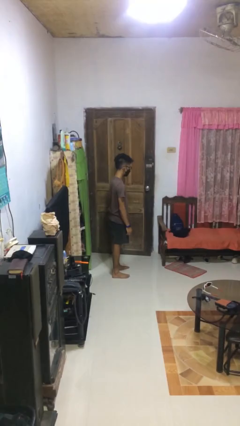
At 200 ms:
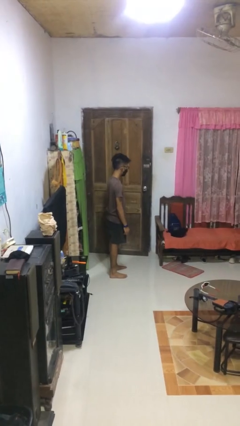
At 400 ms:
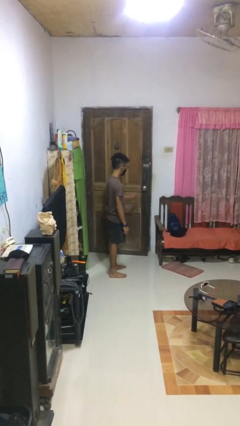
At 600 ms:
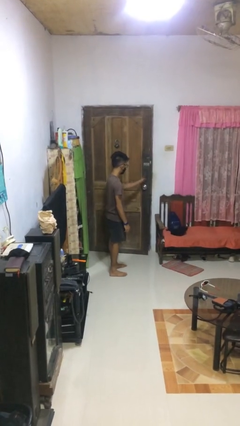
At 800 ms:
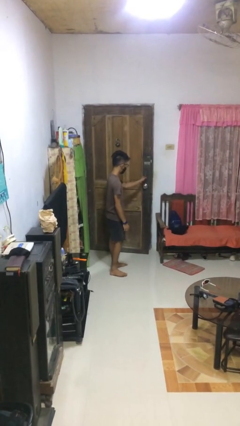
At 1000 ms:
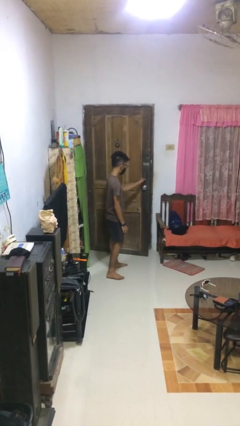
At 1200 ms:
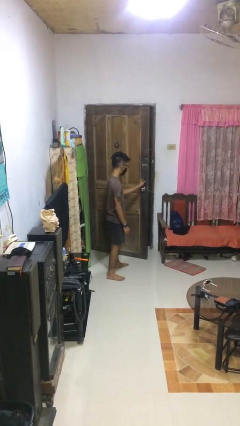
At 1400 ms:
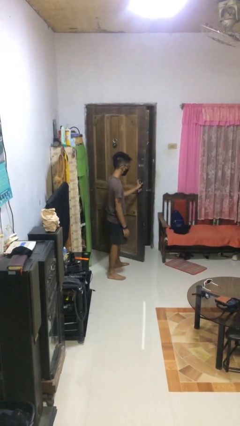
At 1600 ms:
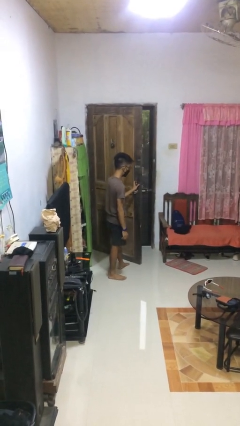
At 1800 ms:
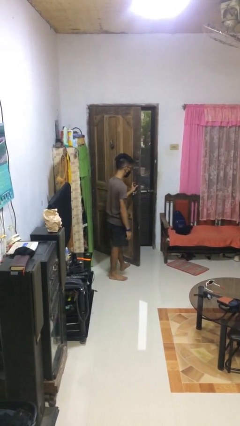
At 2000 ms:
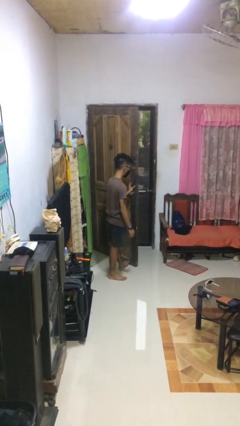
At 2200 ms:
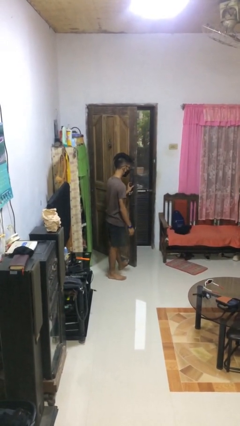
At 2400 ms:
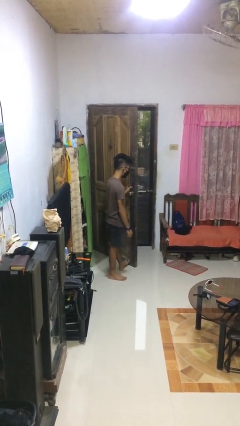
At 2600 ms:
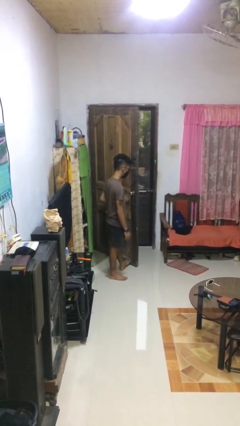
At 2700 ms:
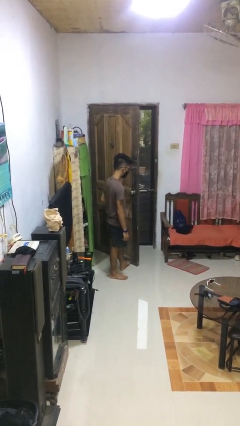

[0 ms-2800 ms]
person opens facility door

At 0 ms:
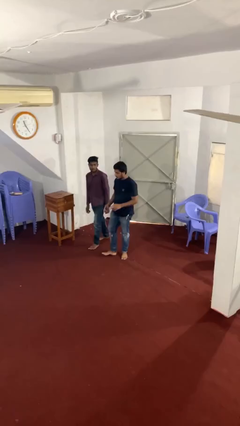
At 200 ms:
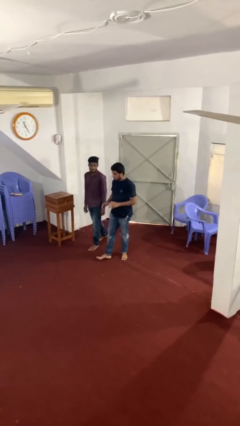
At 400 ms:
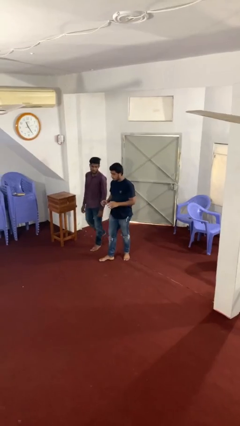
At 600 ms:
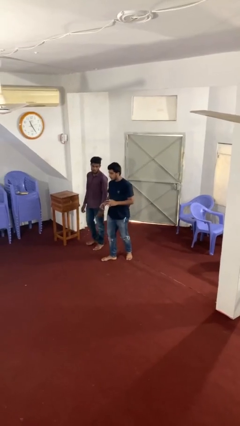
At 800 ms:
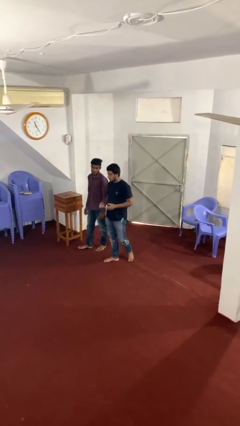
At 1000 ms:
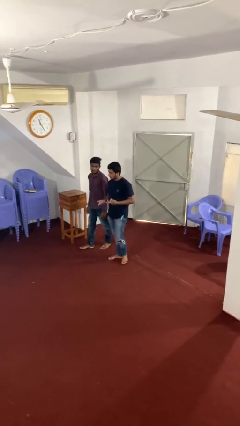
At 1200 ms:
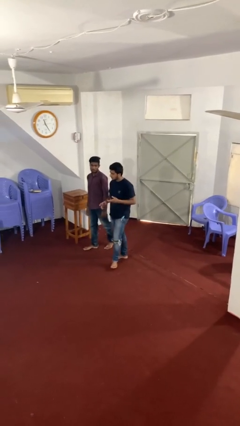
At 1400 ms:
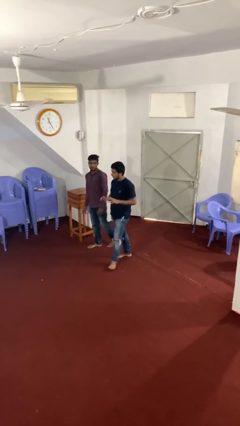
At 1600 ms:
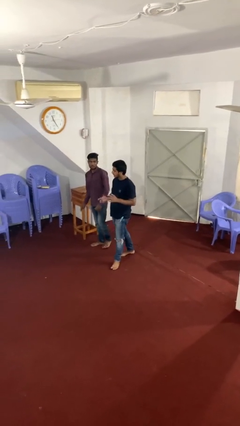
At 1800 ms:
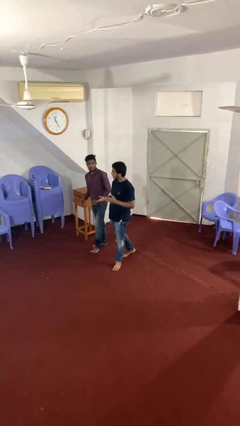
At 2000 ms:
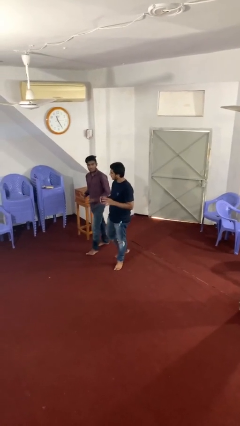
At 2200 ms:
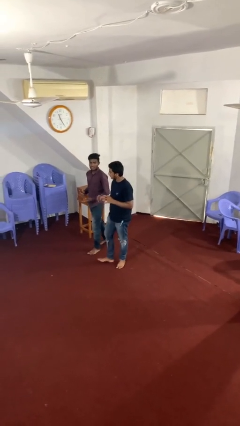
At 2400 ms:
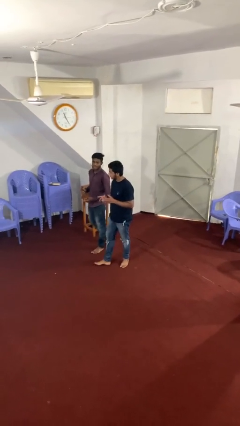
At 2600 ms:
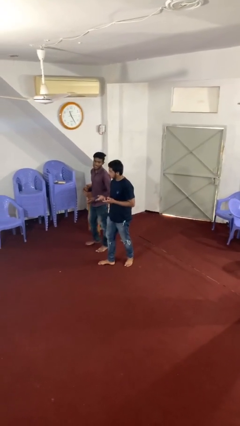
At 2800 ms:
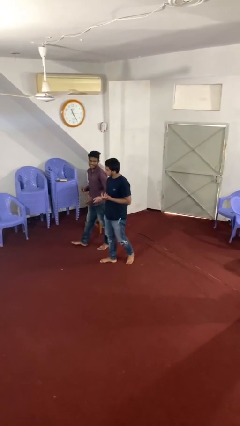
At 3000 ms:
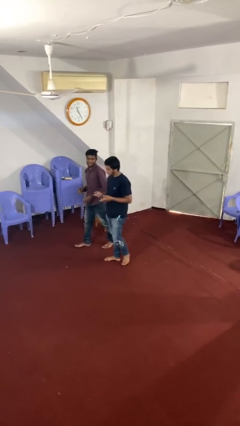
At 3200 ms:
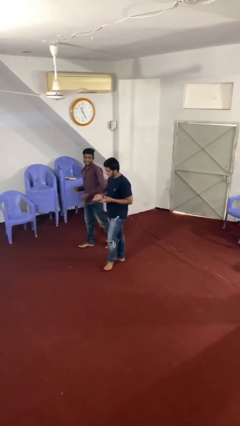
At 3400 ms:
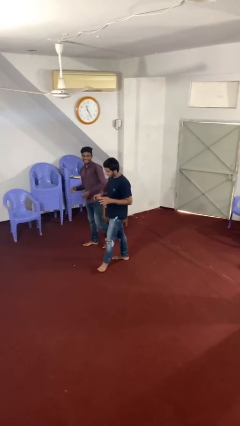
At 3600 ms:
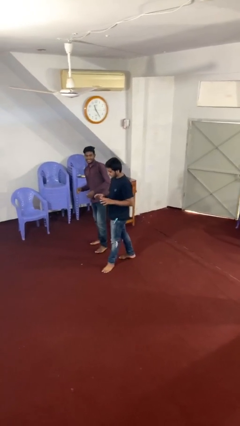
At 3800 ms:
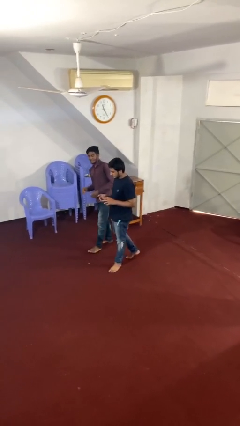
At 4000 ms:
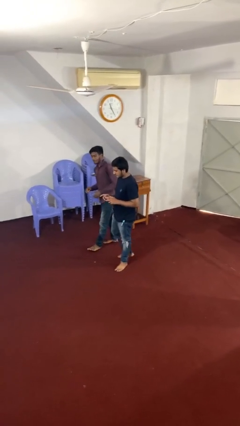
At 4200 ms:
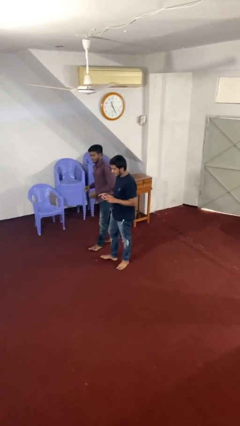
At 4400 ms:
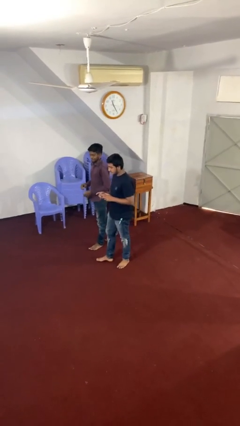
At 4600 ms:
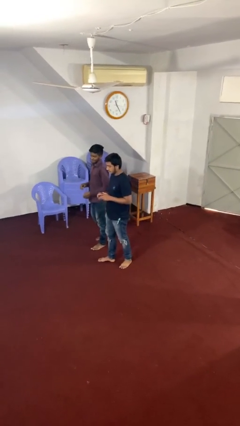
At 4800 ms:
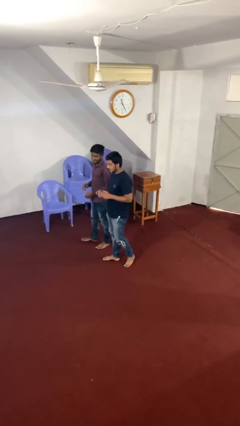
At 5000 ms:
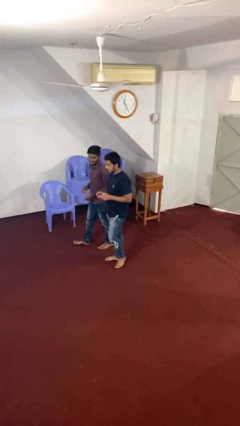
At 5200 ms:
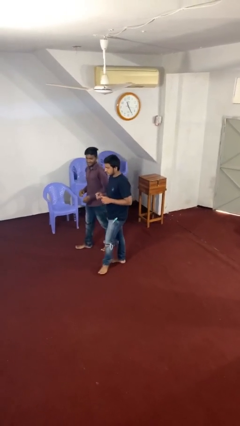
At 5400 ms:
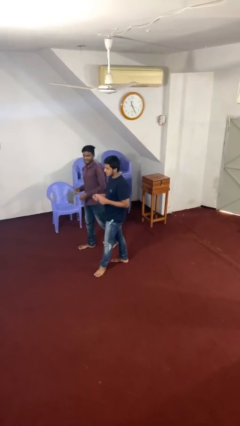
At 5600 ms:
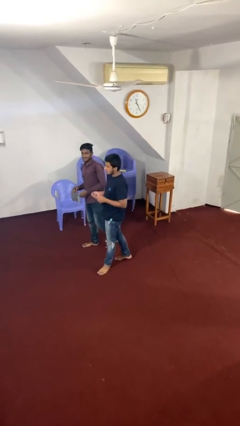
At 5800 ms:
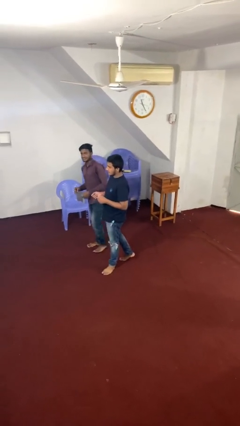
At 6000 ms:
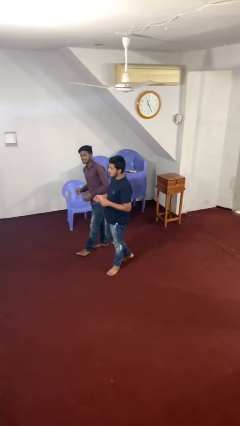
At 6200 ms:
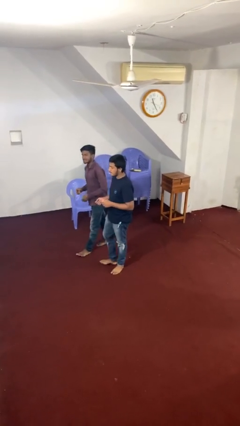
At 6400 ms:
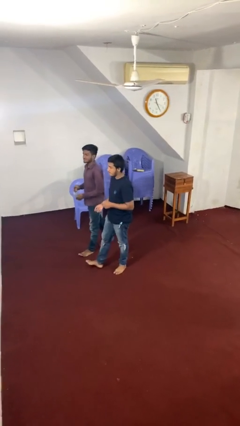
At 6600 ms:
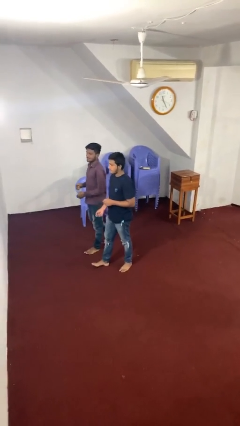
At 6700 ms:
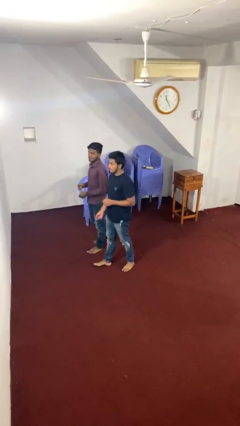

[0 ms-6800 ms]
person talks to person

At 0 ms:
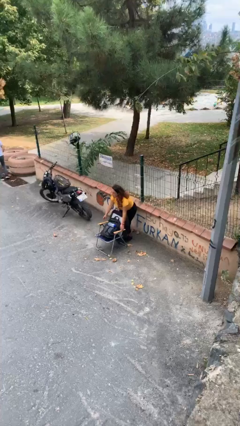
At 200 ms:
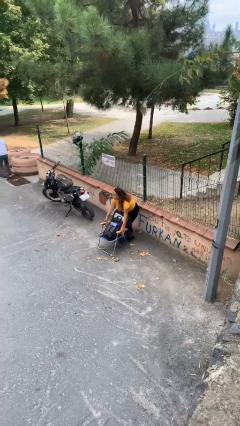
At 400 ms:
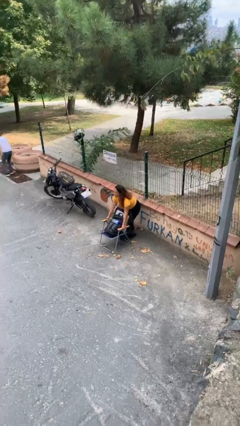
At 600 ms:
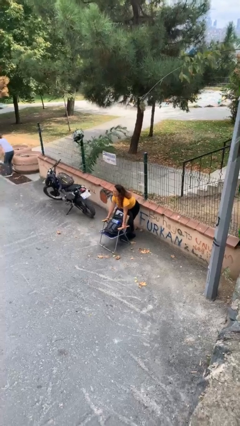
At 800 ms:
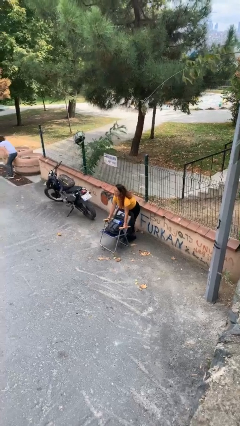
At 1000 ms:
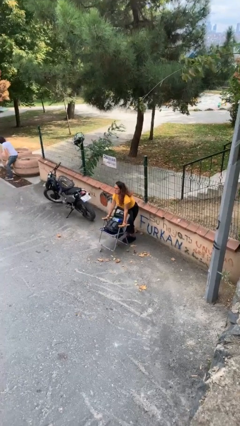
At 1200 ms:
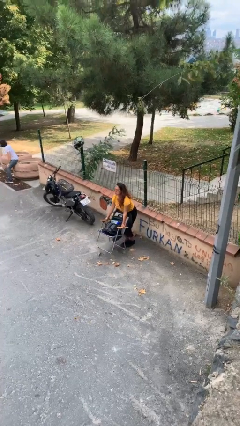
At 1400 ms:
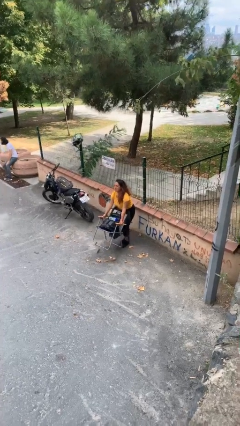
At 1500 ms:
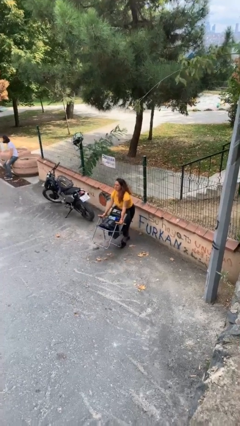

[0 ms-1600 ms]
person picks up object from floor

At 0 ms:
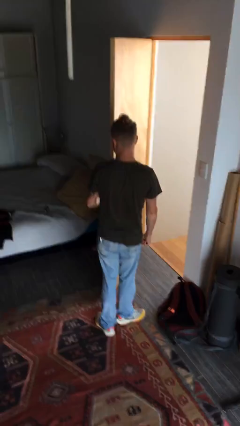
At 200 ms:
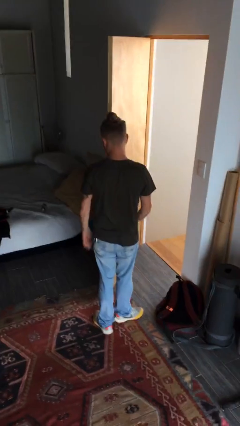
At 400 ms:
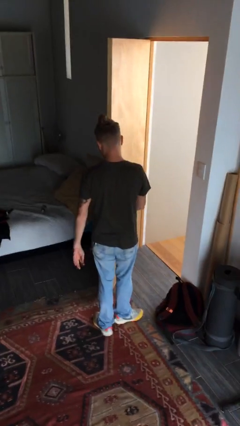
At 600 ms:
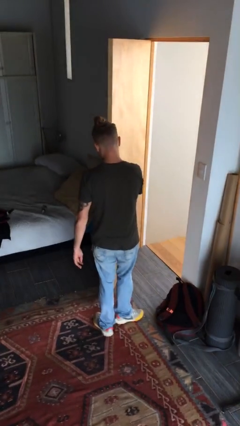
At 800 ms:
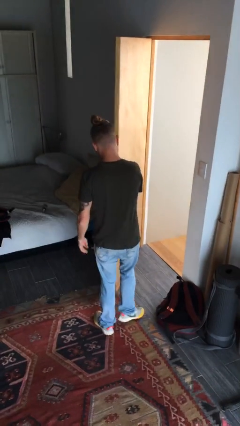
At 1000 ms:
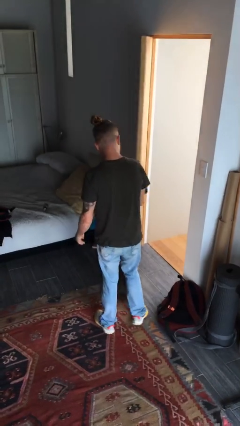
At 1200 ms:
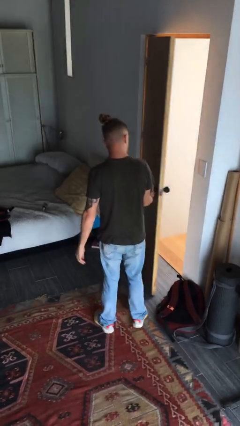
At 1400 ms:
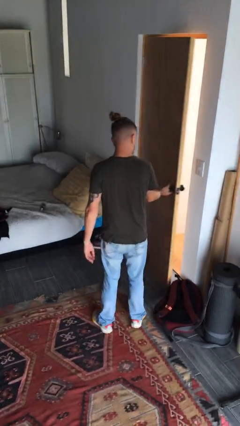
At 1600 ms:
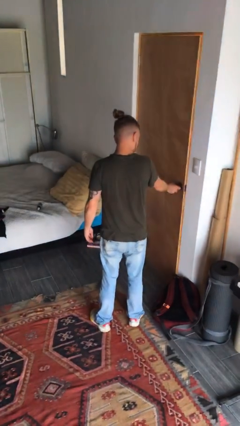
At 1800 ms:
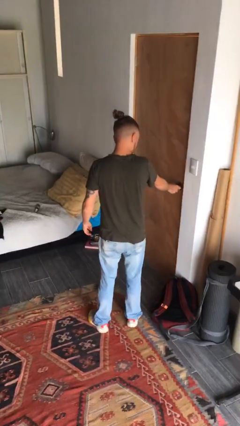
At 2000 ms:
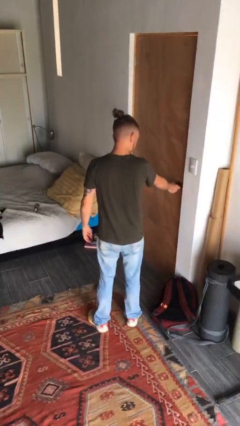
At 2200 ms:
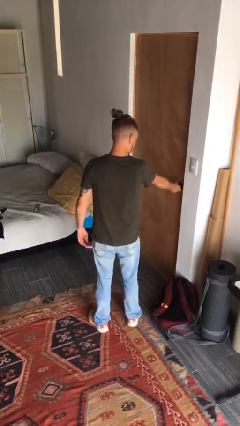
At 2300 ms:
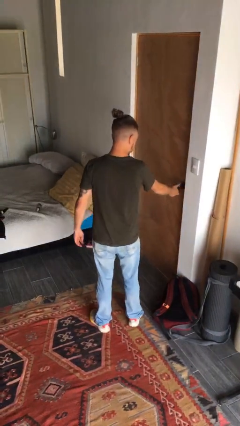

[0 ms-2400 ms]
person closes facility door

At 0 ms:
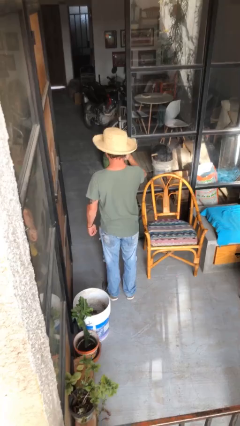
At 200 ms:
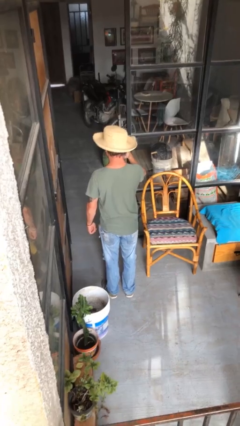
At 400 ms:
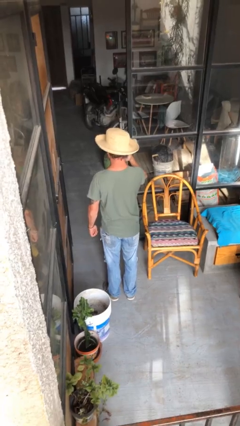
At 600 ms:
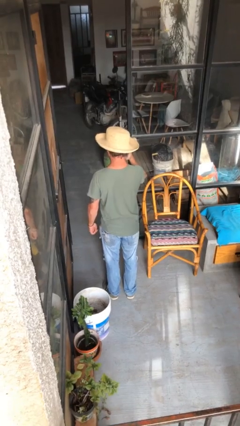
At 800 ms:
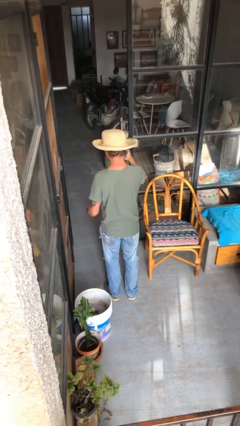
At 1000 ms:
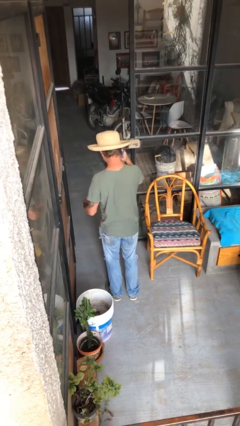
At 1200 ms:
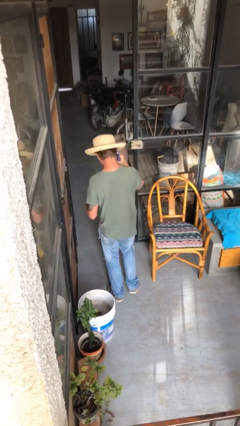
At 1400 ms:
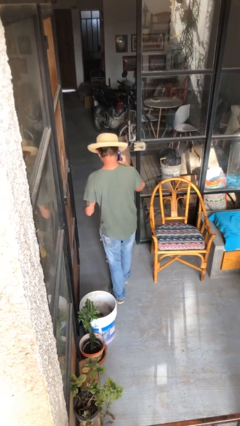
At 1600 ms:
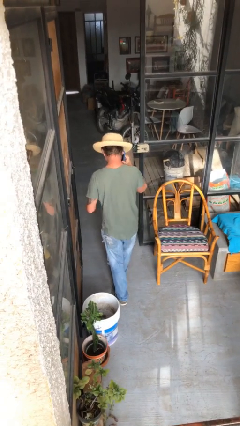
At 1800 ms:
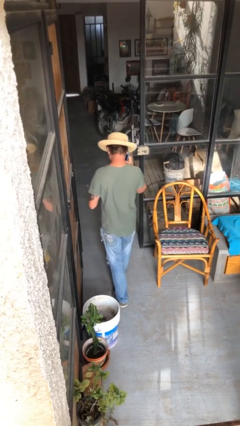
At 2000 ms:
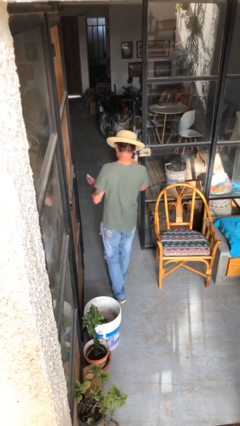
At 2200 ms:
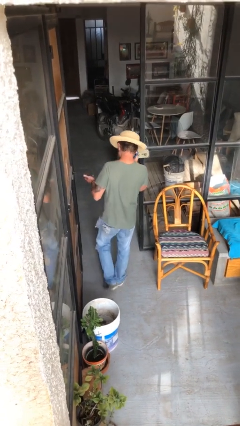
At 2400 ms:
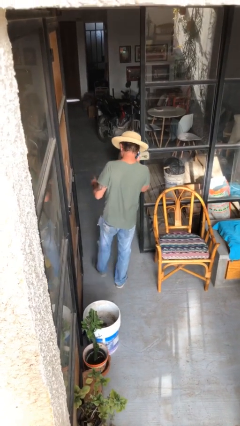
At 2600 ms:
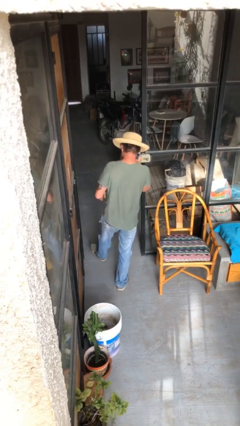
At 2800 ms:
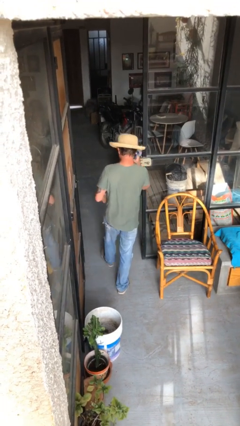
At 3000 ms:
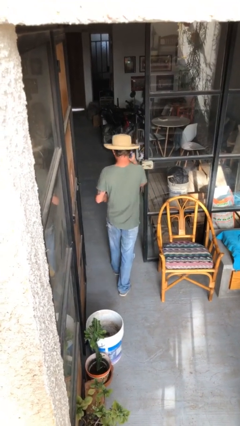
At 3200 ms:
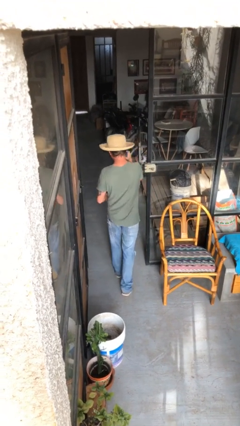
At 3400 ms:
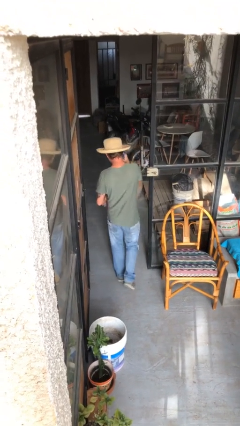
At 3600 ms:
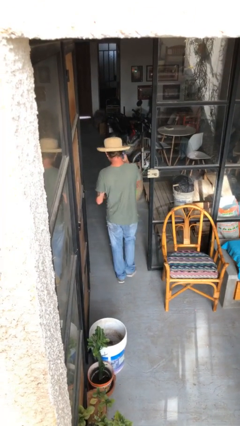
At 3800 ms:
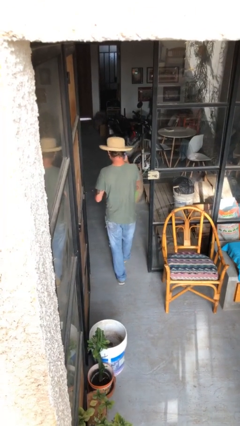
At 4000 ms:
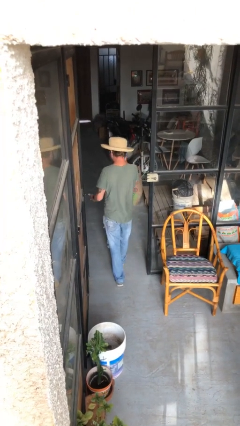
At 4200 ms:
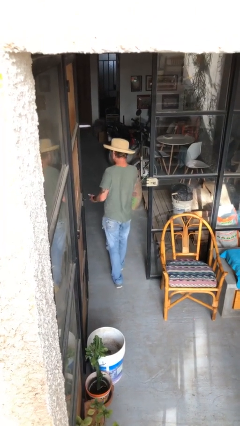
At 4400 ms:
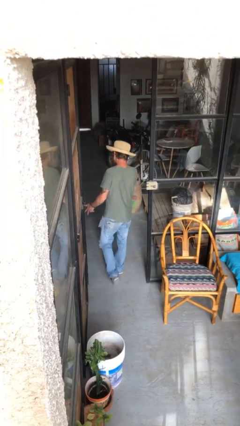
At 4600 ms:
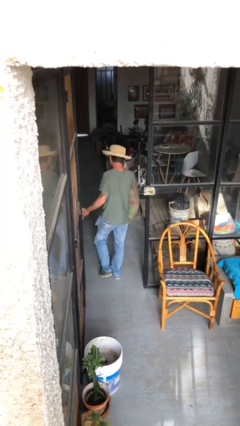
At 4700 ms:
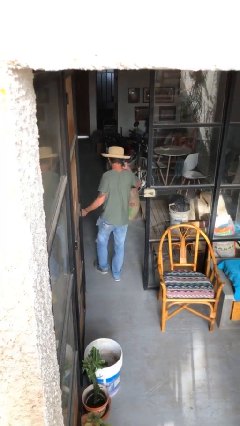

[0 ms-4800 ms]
person exits scene through structure
